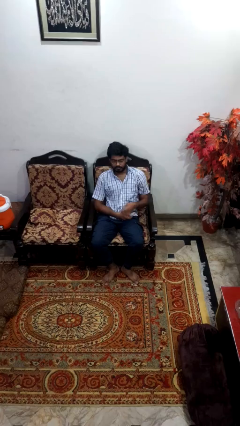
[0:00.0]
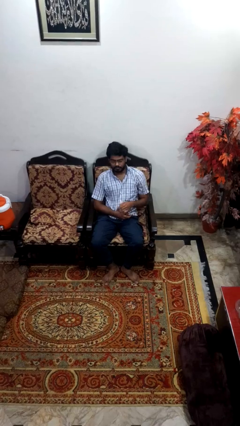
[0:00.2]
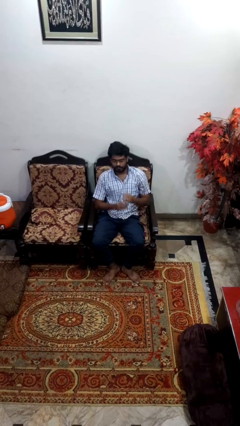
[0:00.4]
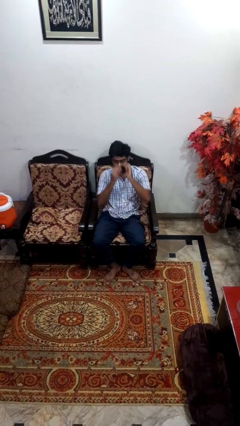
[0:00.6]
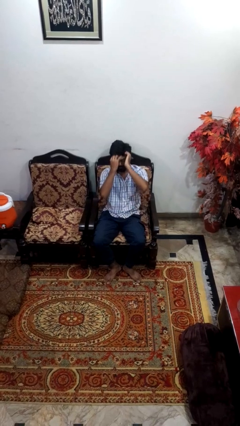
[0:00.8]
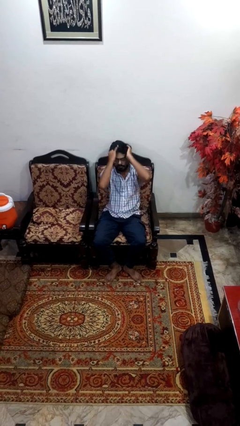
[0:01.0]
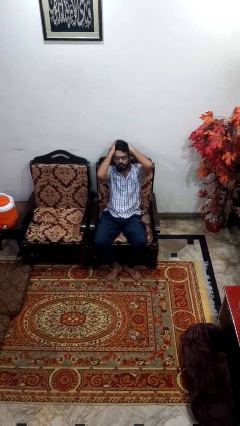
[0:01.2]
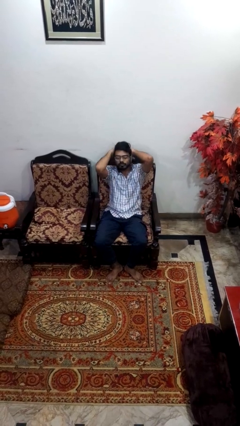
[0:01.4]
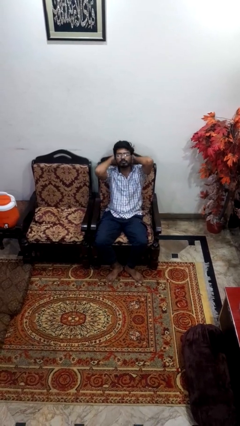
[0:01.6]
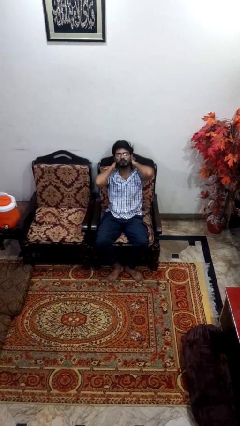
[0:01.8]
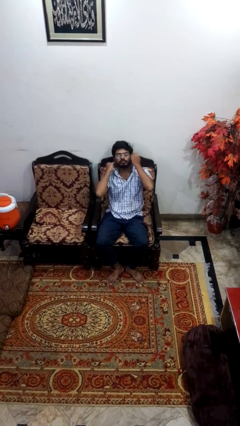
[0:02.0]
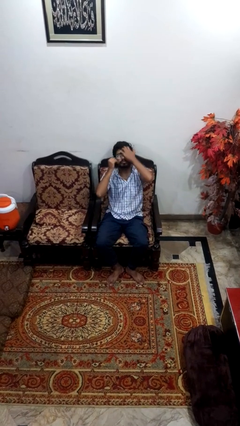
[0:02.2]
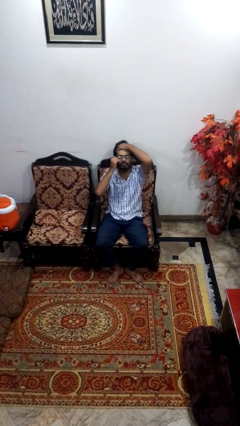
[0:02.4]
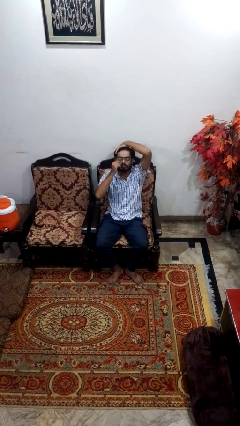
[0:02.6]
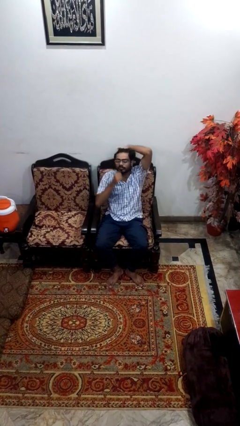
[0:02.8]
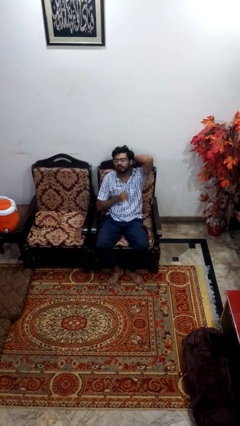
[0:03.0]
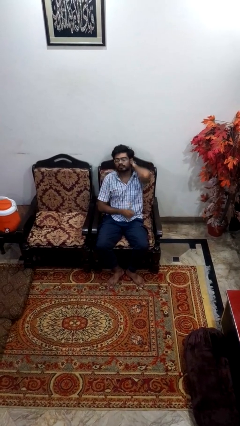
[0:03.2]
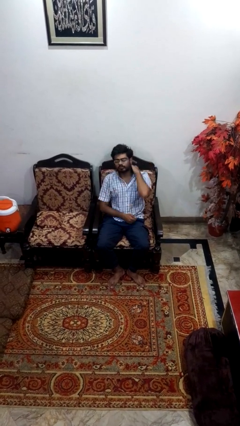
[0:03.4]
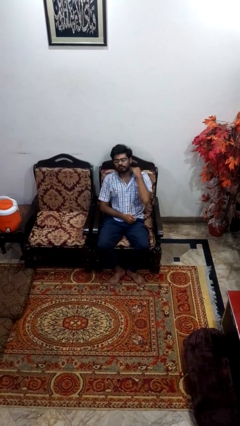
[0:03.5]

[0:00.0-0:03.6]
person strokes hair

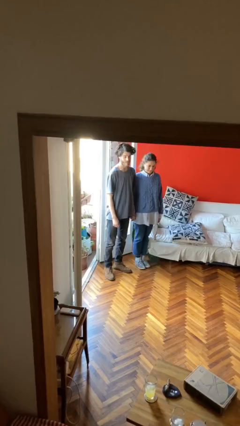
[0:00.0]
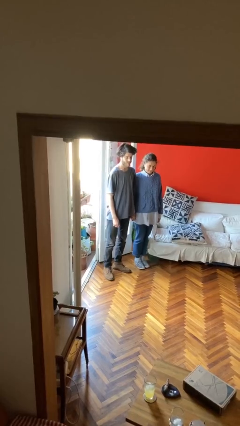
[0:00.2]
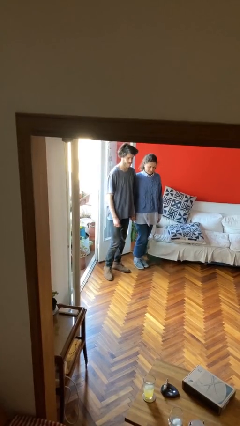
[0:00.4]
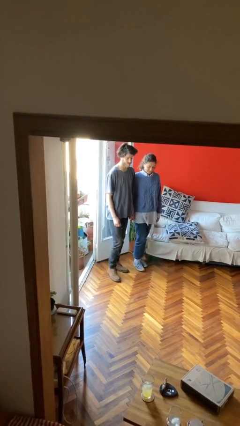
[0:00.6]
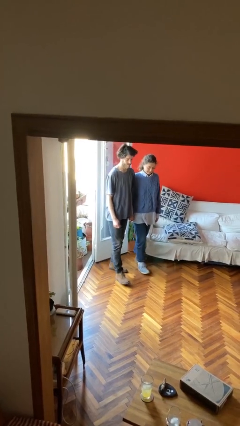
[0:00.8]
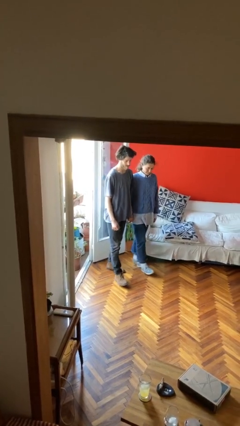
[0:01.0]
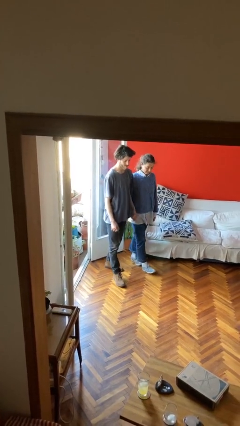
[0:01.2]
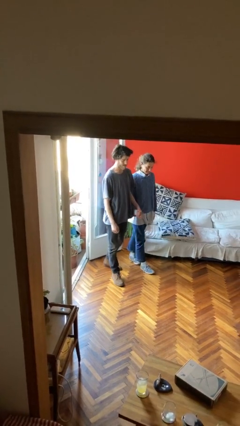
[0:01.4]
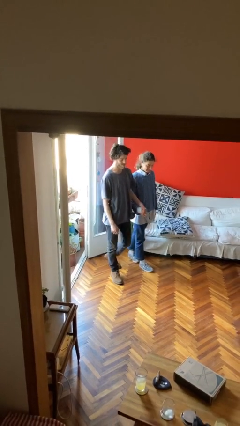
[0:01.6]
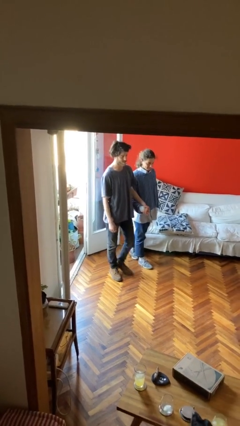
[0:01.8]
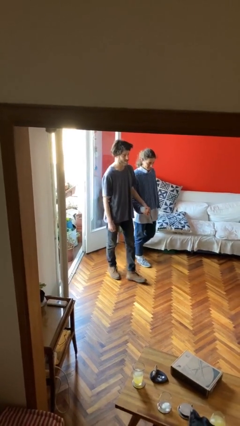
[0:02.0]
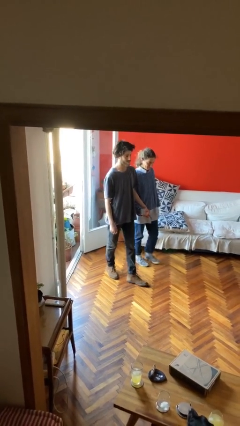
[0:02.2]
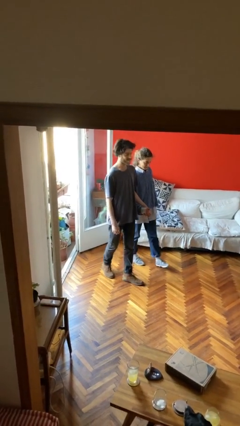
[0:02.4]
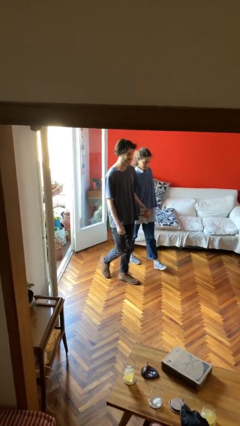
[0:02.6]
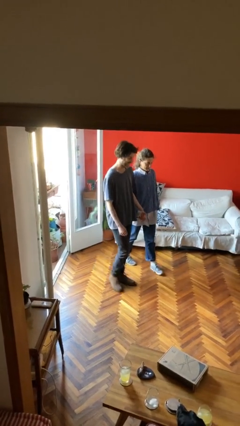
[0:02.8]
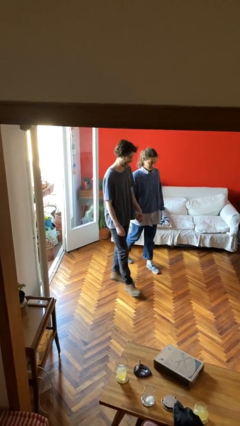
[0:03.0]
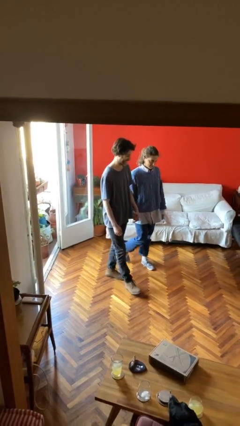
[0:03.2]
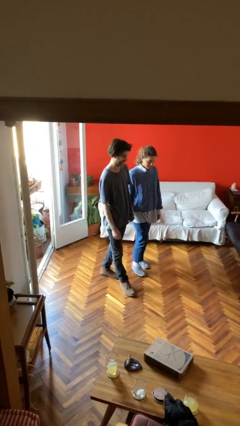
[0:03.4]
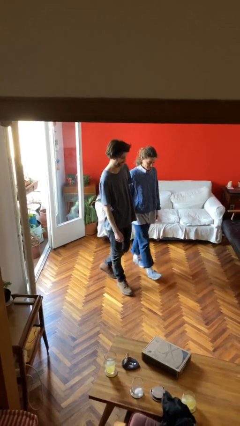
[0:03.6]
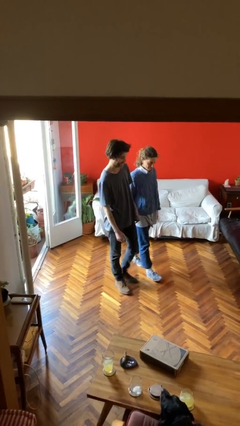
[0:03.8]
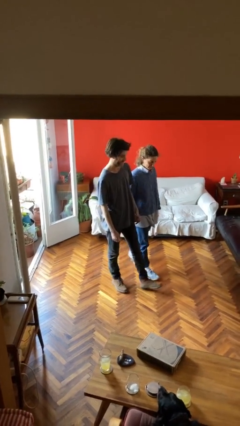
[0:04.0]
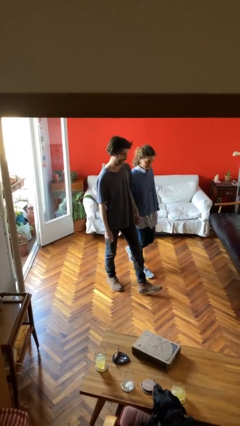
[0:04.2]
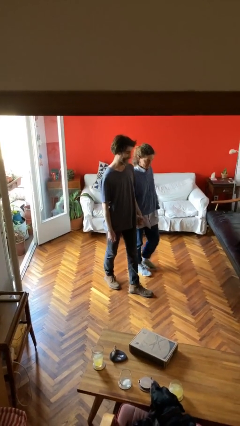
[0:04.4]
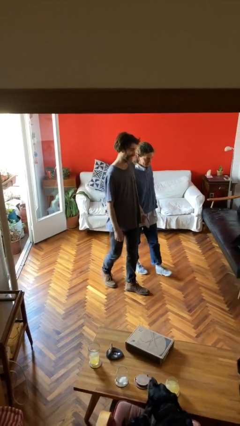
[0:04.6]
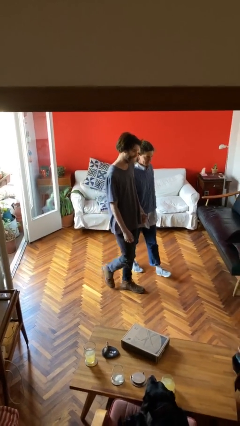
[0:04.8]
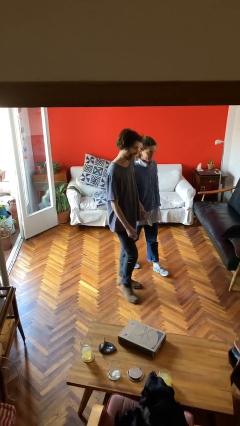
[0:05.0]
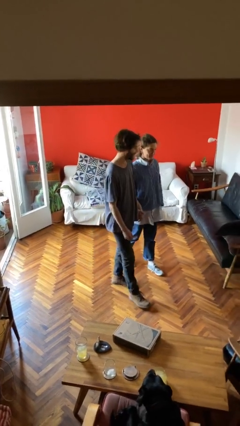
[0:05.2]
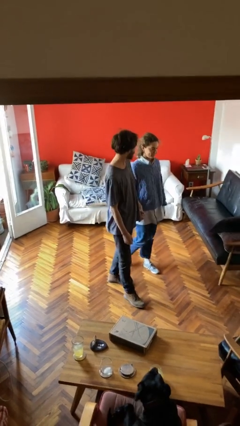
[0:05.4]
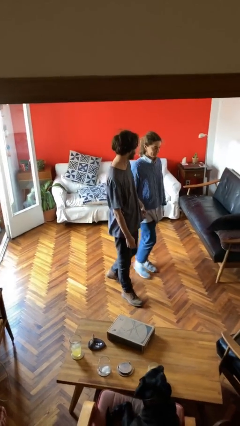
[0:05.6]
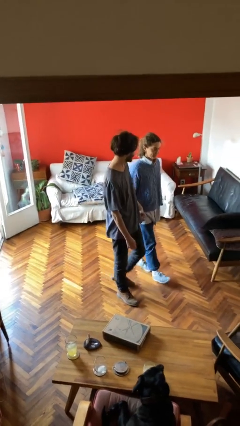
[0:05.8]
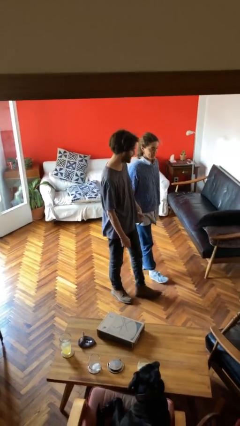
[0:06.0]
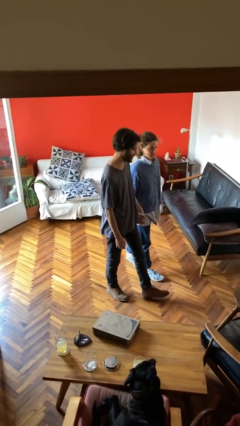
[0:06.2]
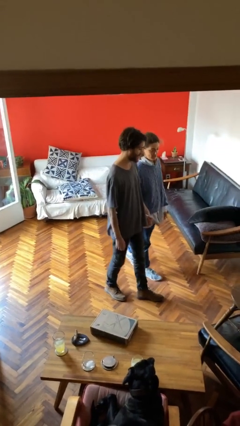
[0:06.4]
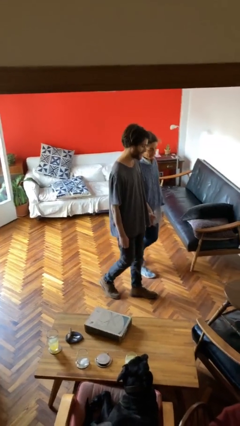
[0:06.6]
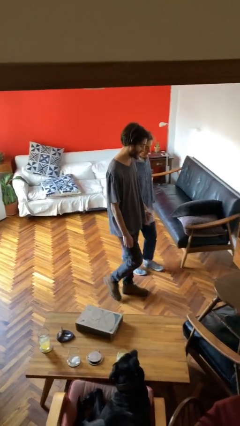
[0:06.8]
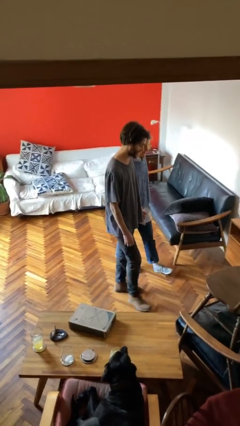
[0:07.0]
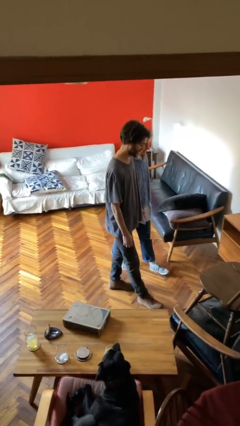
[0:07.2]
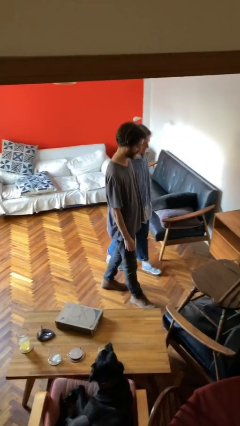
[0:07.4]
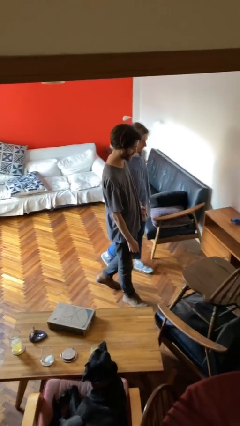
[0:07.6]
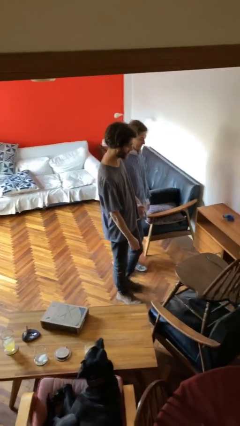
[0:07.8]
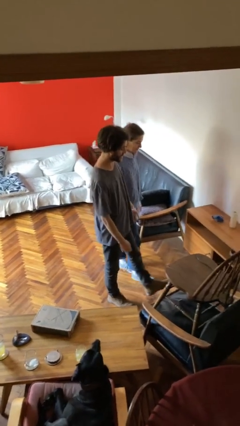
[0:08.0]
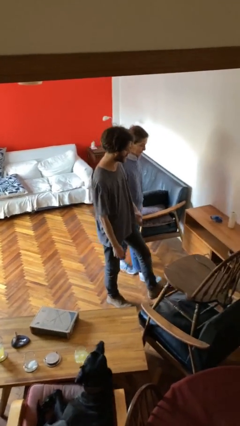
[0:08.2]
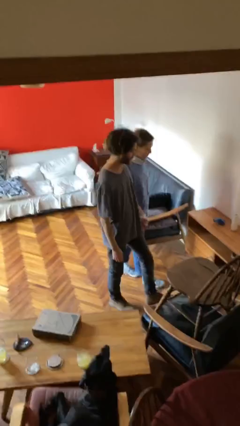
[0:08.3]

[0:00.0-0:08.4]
person holds hand

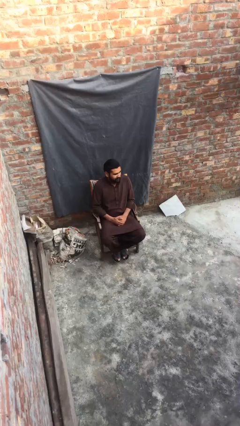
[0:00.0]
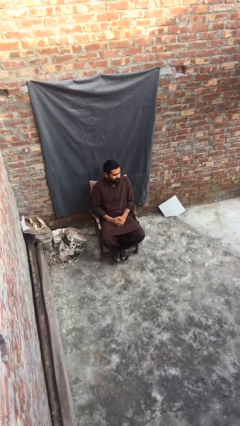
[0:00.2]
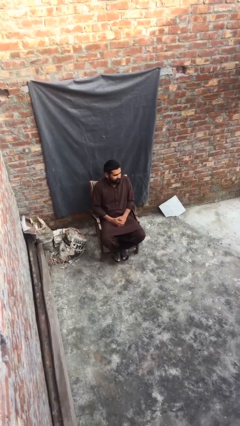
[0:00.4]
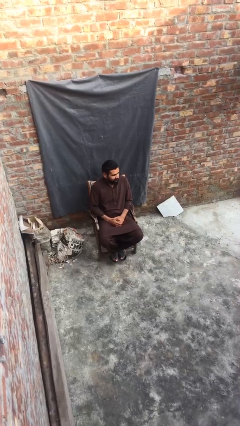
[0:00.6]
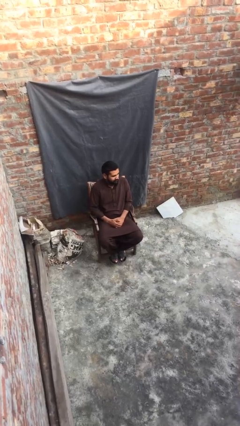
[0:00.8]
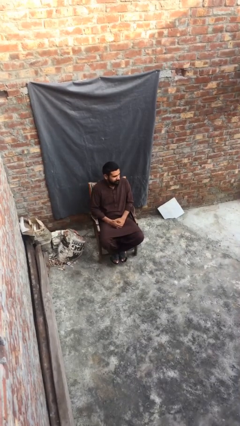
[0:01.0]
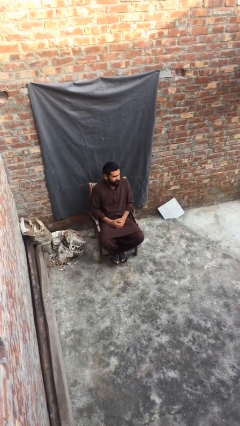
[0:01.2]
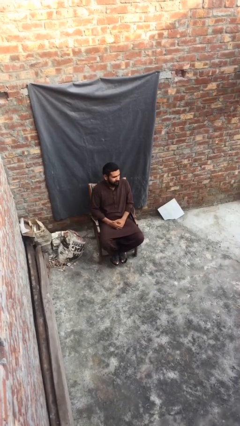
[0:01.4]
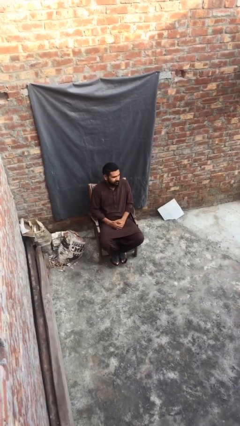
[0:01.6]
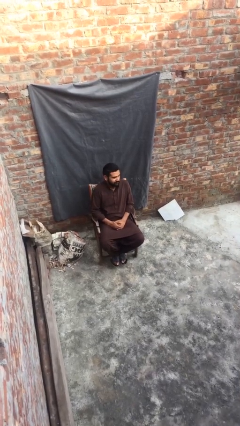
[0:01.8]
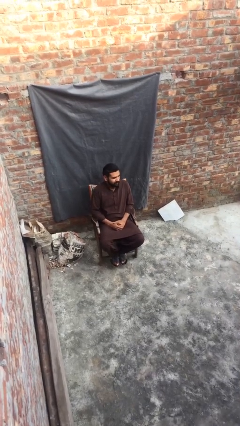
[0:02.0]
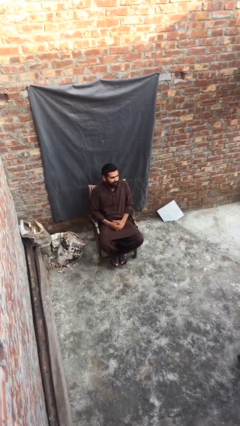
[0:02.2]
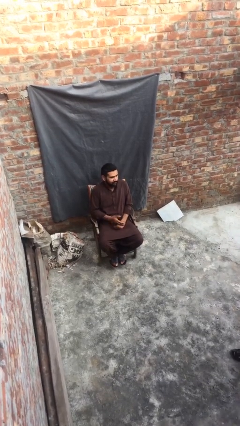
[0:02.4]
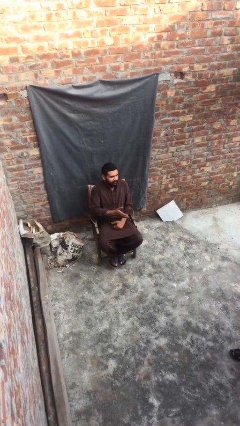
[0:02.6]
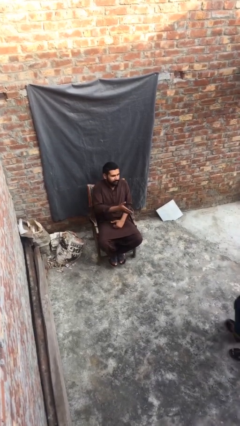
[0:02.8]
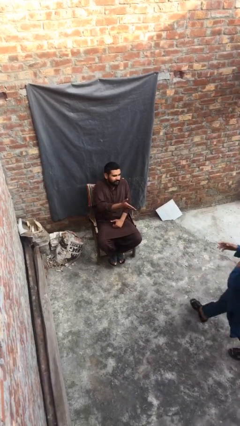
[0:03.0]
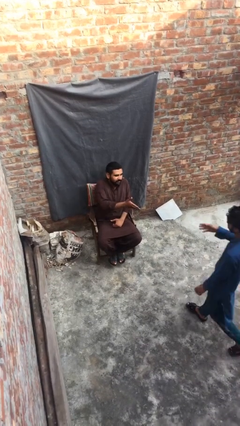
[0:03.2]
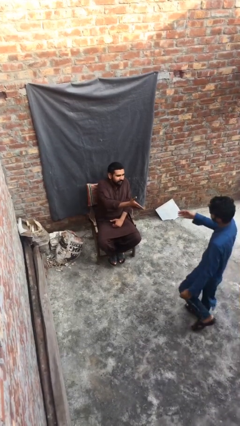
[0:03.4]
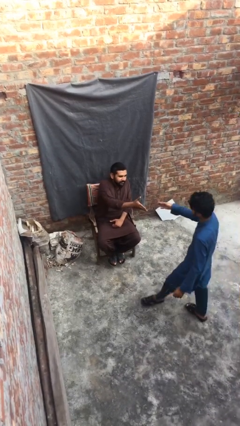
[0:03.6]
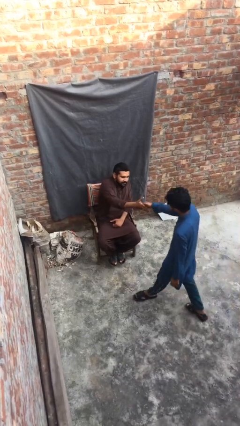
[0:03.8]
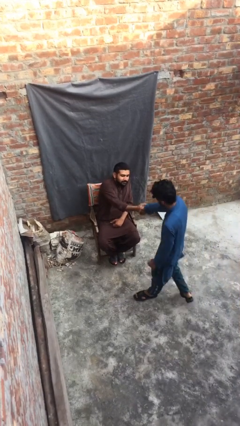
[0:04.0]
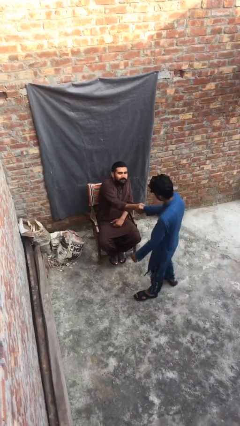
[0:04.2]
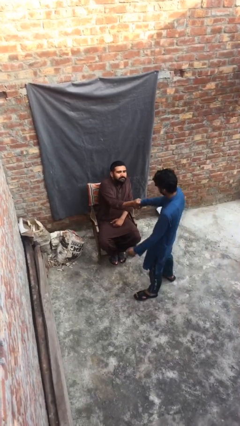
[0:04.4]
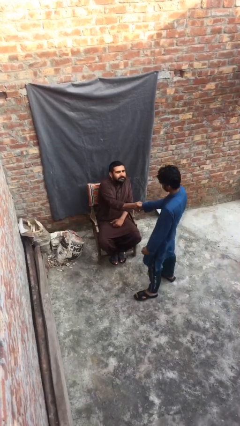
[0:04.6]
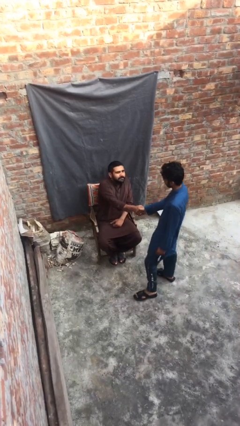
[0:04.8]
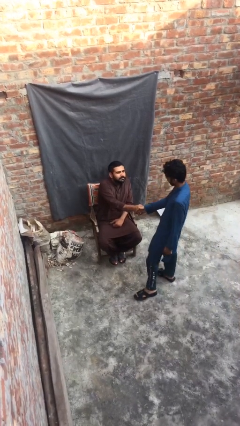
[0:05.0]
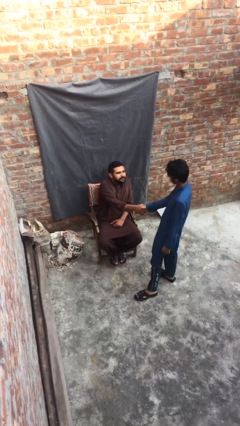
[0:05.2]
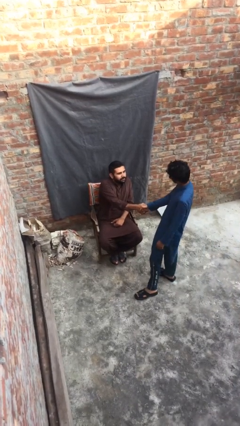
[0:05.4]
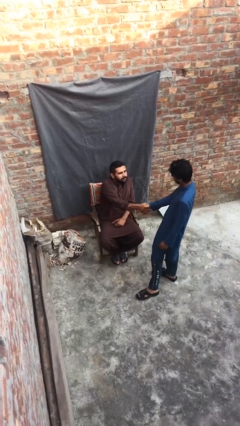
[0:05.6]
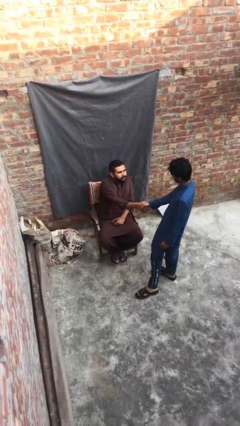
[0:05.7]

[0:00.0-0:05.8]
person shakes hand

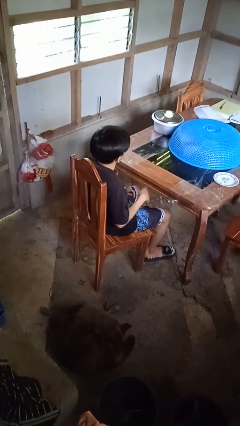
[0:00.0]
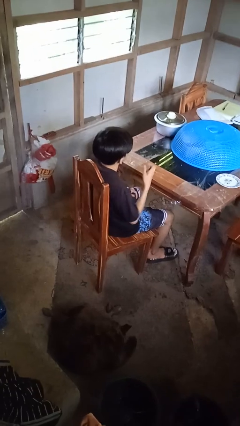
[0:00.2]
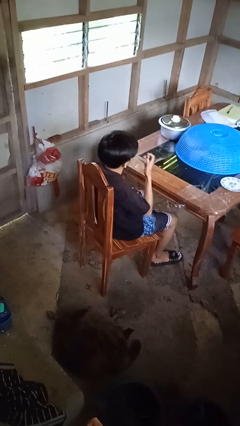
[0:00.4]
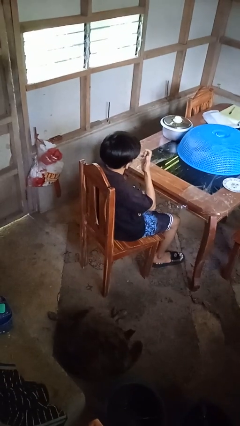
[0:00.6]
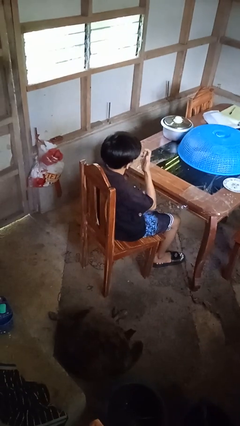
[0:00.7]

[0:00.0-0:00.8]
person licks fingers
